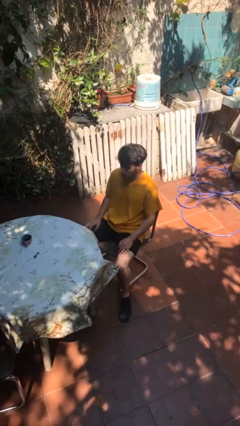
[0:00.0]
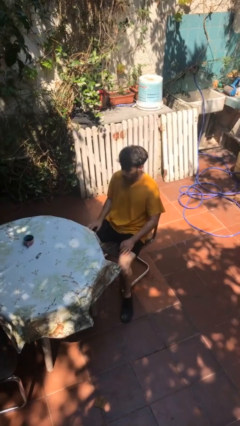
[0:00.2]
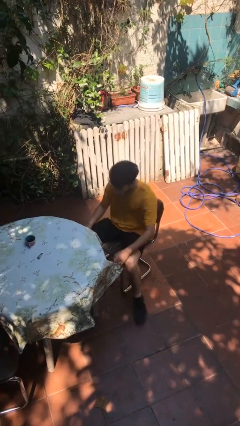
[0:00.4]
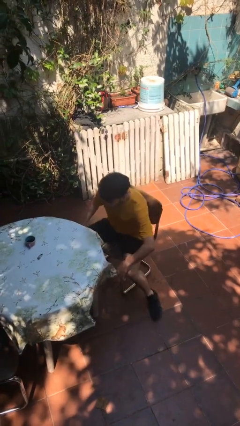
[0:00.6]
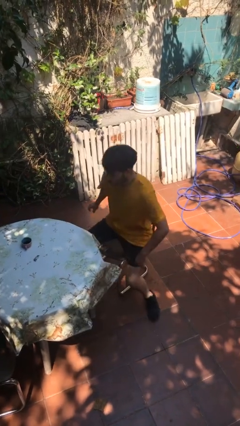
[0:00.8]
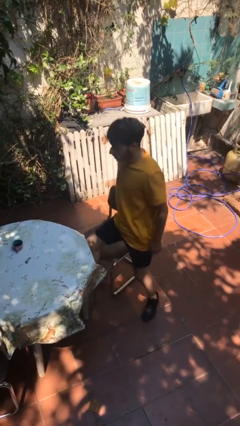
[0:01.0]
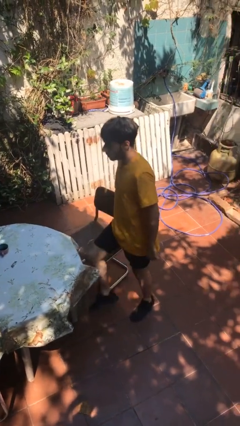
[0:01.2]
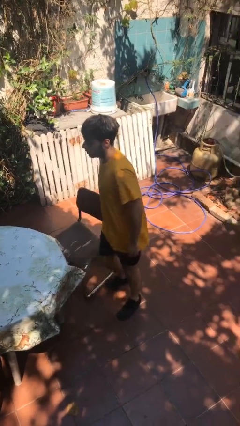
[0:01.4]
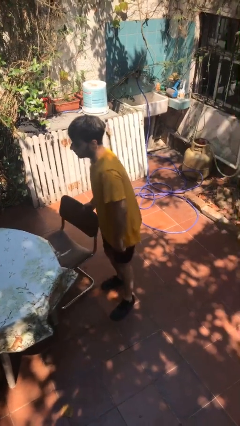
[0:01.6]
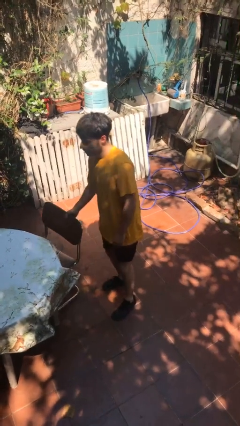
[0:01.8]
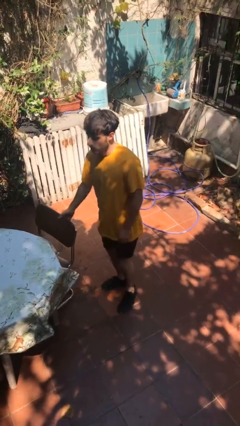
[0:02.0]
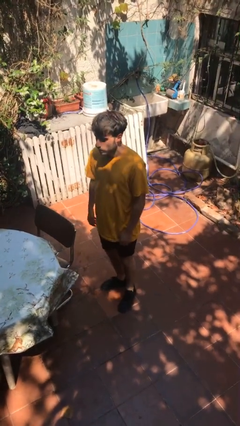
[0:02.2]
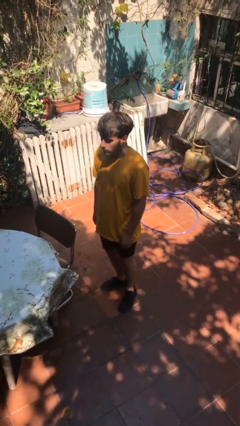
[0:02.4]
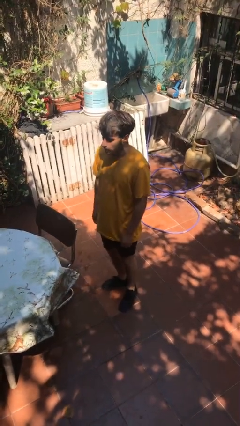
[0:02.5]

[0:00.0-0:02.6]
person stands up

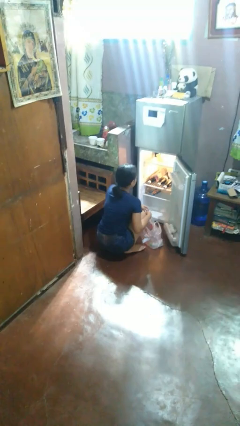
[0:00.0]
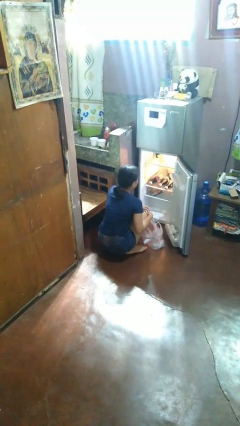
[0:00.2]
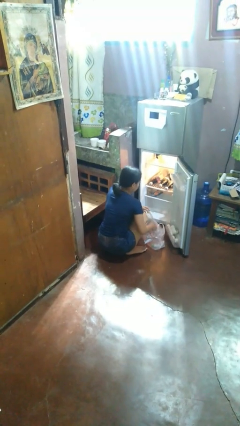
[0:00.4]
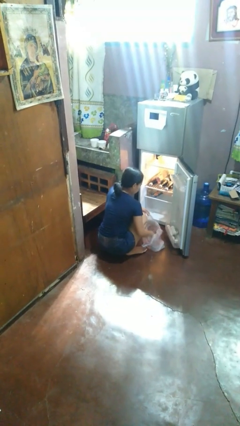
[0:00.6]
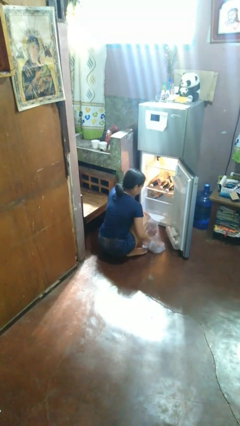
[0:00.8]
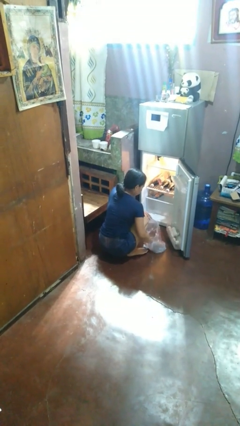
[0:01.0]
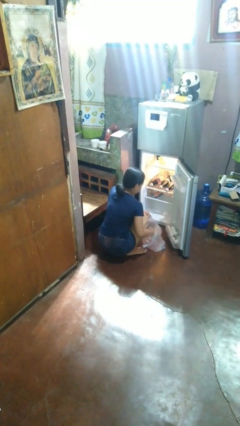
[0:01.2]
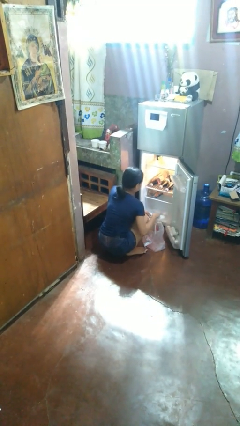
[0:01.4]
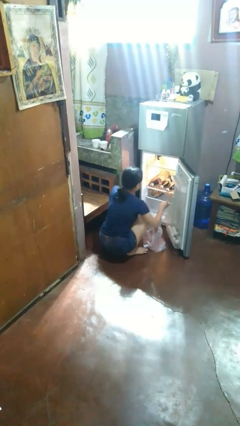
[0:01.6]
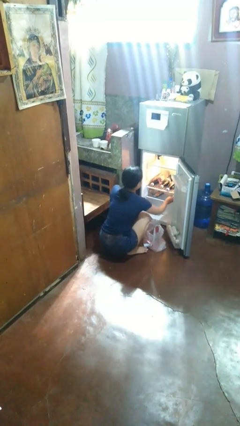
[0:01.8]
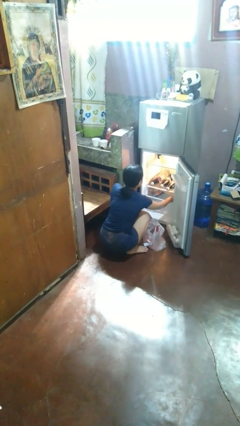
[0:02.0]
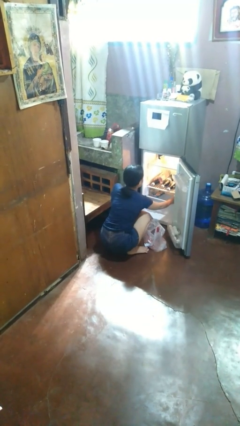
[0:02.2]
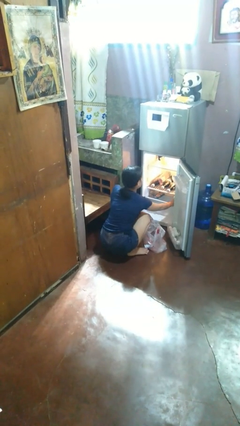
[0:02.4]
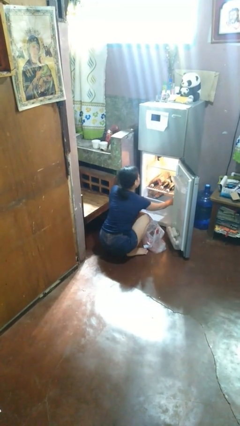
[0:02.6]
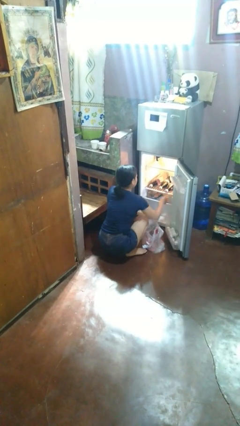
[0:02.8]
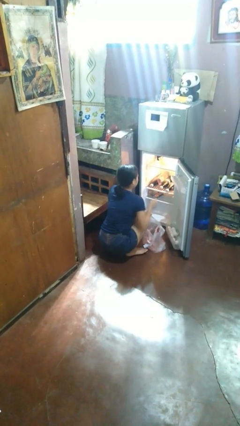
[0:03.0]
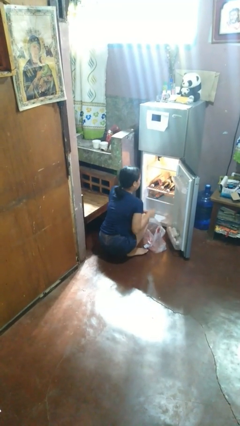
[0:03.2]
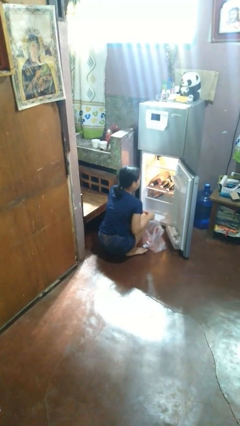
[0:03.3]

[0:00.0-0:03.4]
person loads groceries into refrigerator

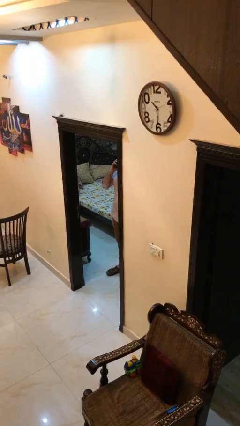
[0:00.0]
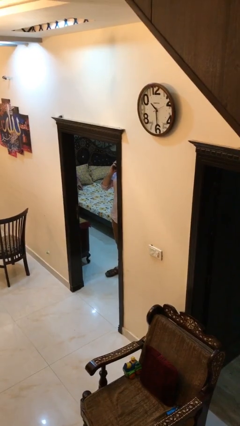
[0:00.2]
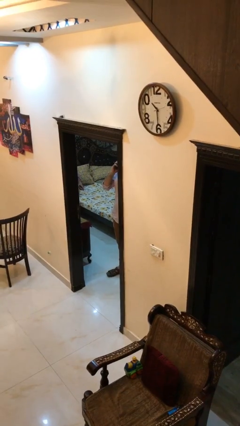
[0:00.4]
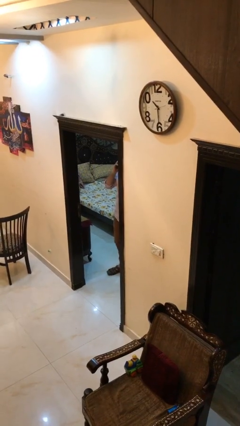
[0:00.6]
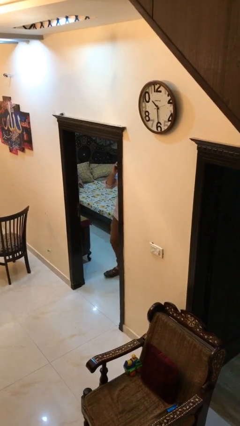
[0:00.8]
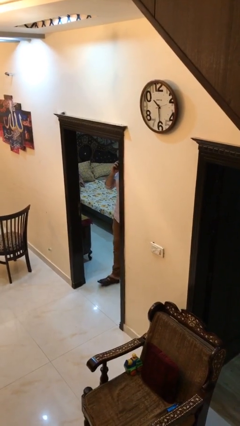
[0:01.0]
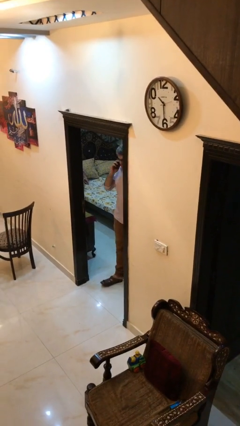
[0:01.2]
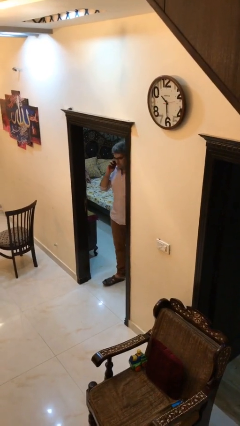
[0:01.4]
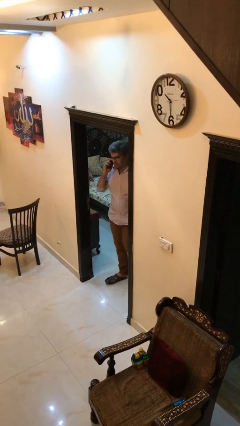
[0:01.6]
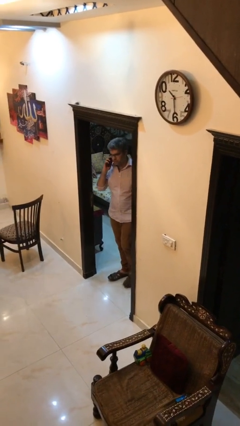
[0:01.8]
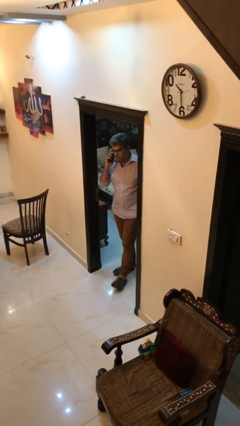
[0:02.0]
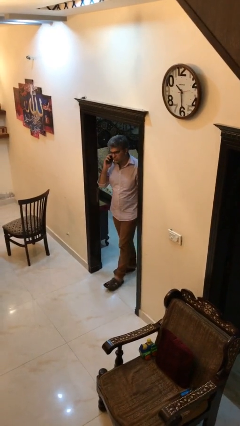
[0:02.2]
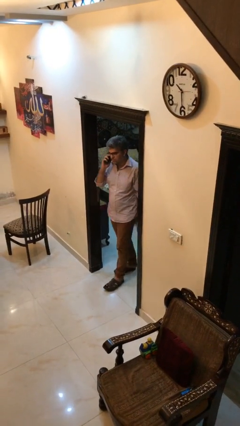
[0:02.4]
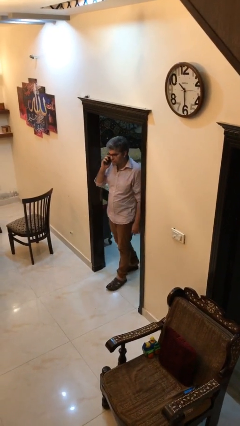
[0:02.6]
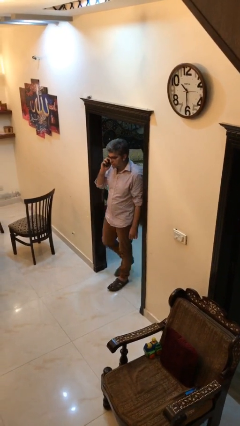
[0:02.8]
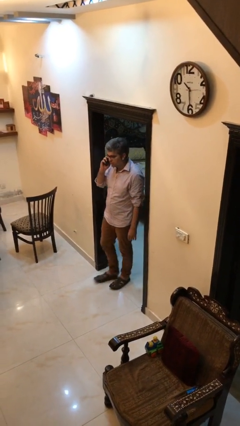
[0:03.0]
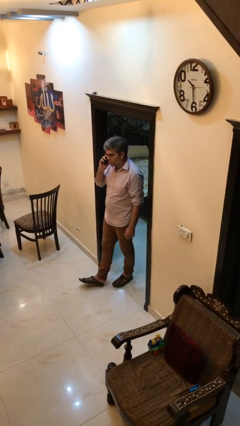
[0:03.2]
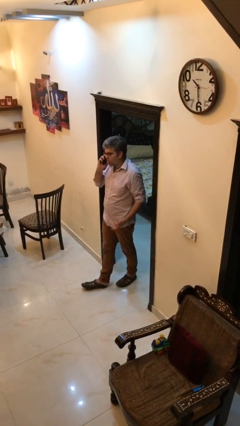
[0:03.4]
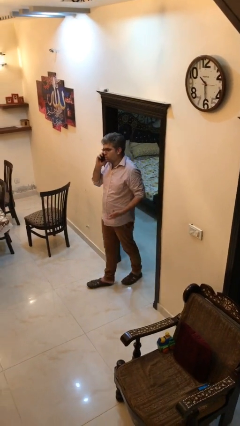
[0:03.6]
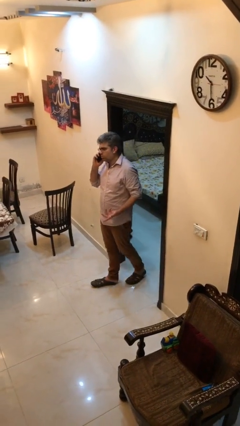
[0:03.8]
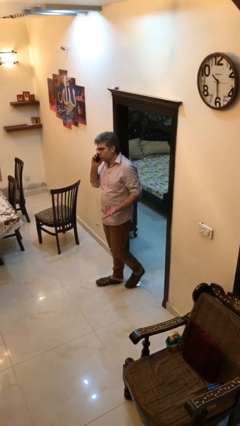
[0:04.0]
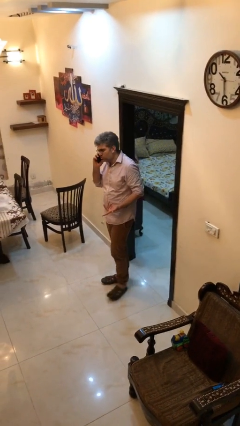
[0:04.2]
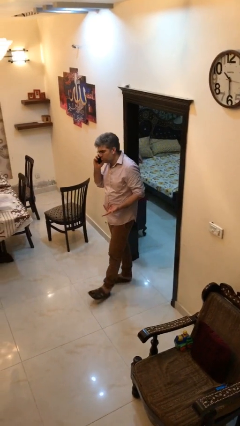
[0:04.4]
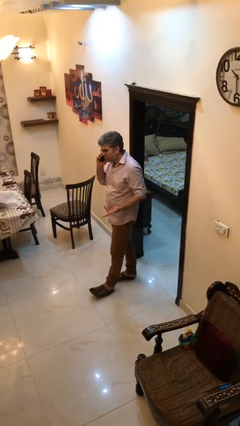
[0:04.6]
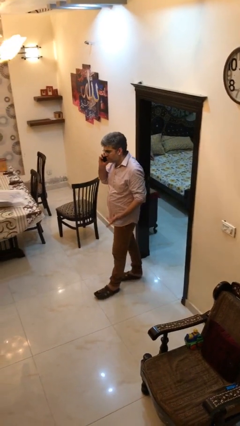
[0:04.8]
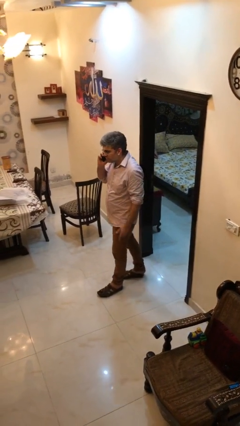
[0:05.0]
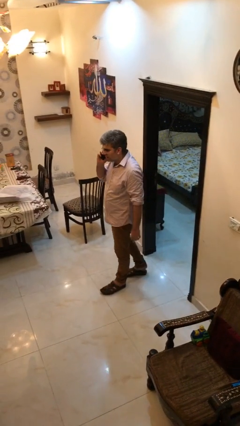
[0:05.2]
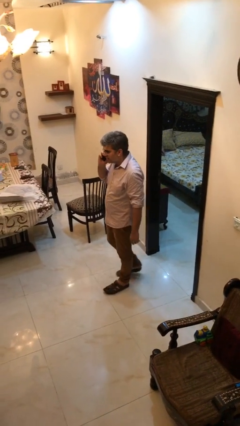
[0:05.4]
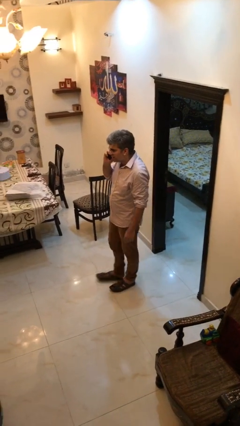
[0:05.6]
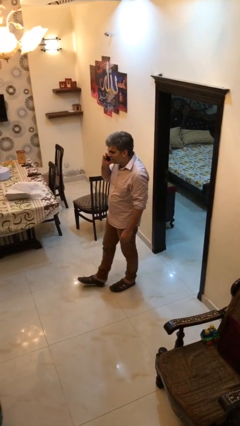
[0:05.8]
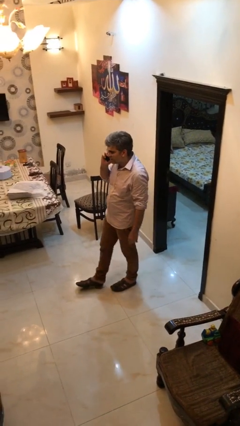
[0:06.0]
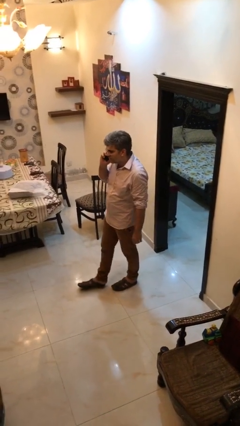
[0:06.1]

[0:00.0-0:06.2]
person enters scene through structure

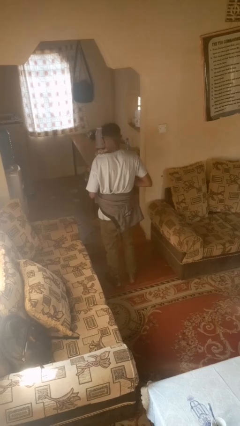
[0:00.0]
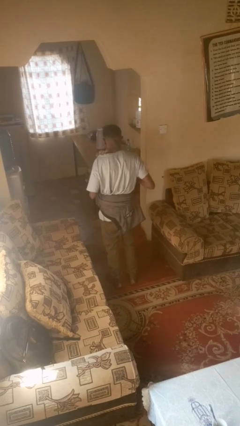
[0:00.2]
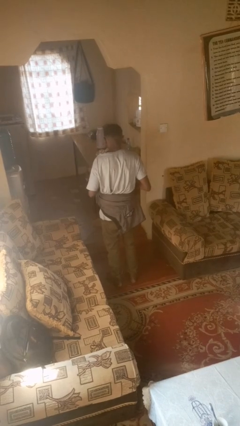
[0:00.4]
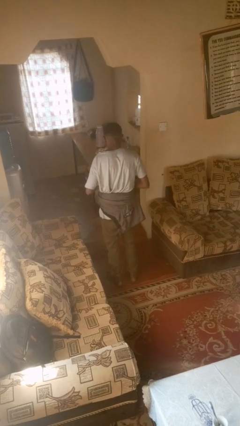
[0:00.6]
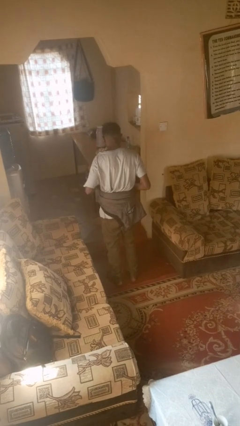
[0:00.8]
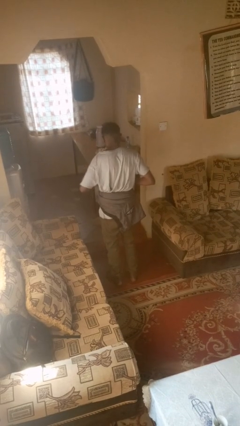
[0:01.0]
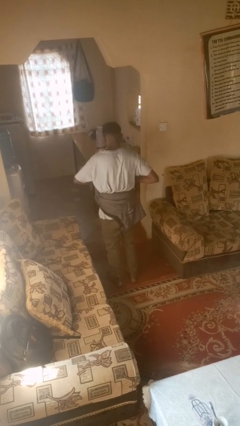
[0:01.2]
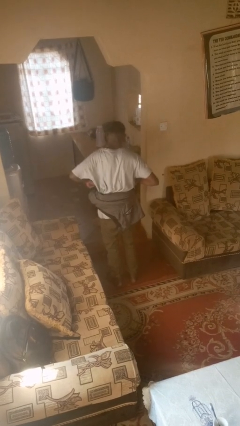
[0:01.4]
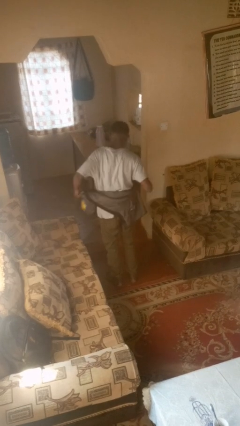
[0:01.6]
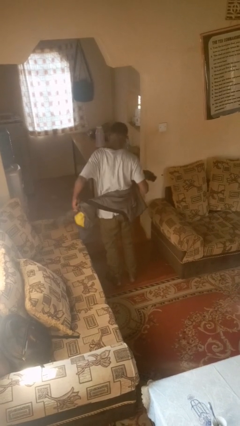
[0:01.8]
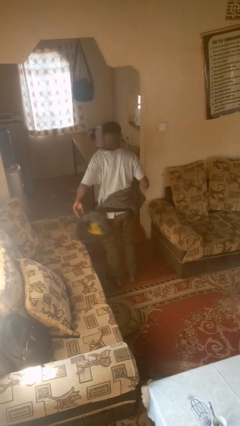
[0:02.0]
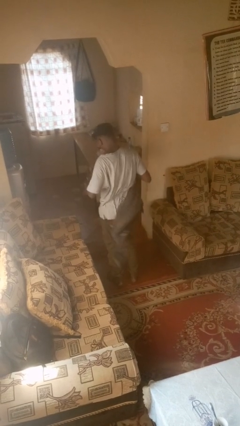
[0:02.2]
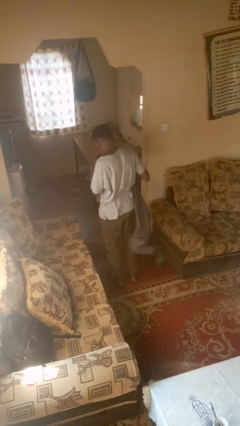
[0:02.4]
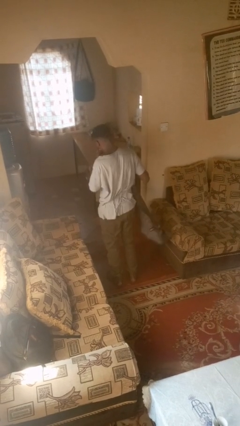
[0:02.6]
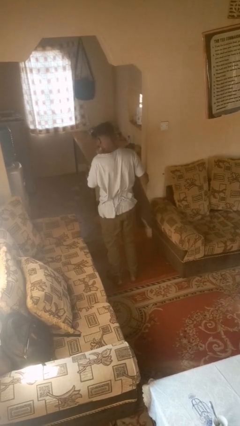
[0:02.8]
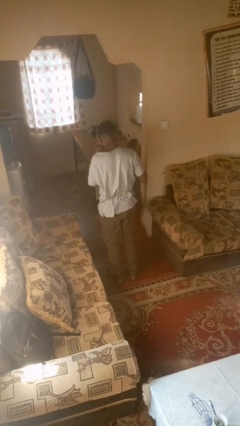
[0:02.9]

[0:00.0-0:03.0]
person unties jacket around waist

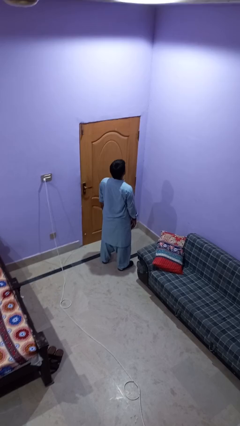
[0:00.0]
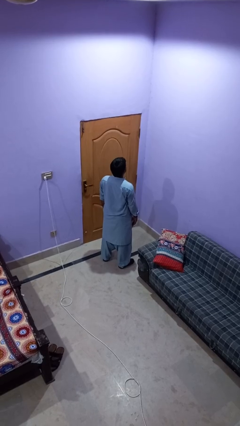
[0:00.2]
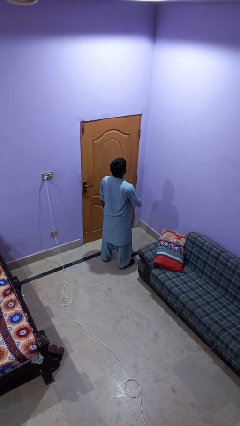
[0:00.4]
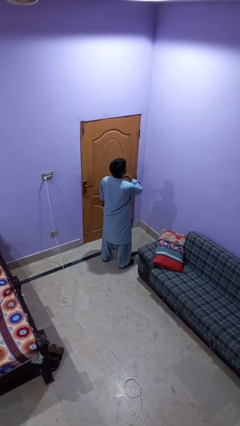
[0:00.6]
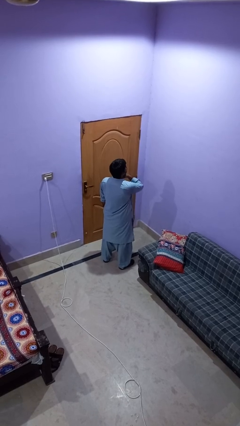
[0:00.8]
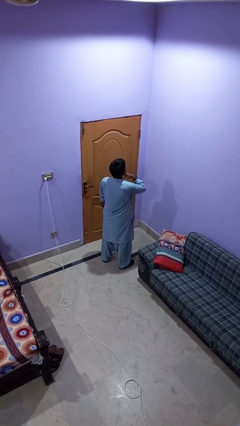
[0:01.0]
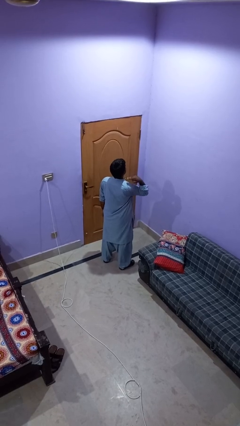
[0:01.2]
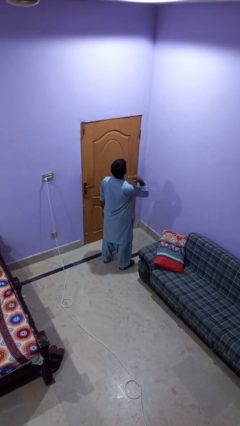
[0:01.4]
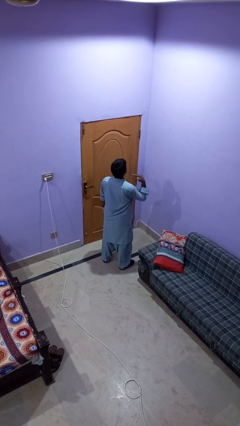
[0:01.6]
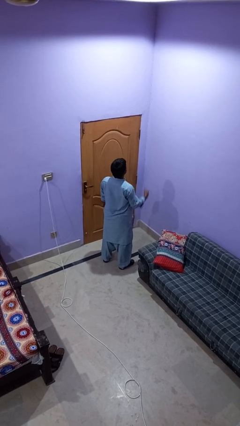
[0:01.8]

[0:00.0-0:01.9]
person gestures cut

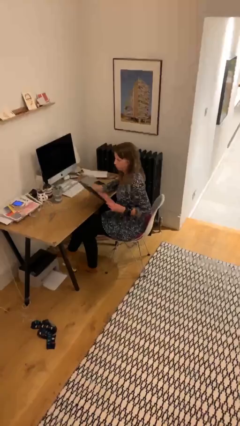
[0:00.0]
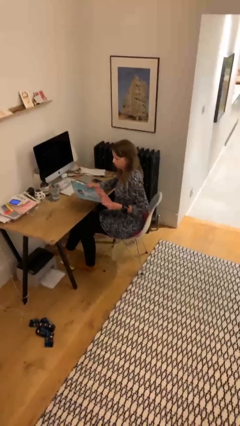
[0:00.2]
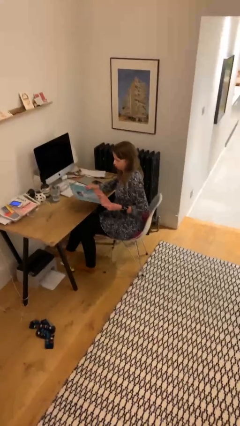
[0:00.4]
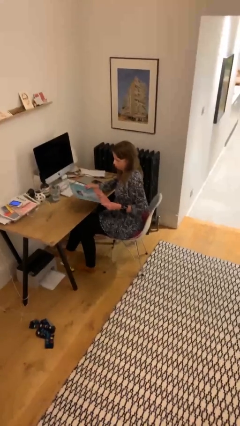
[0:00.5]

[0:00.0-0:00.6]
person picks up object from table
